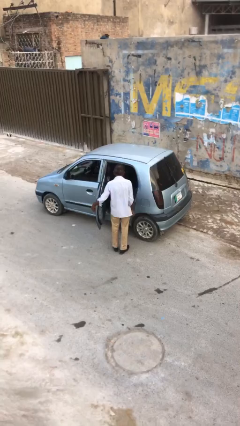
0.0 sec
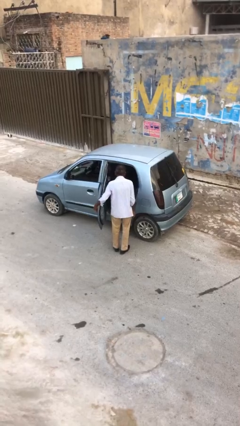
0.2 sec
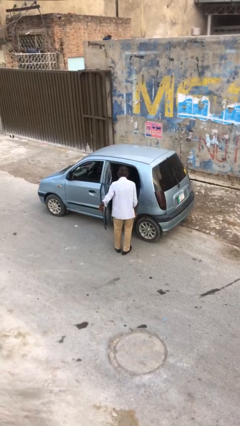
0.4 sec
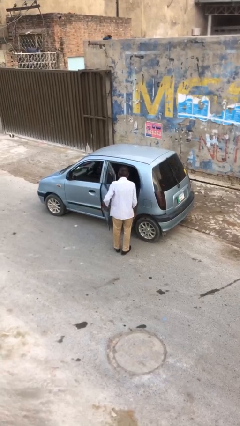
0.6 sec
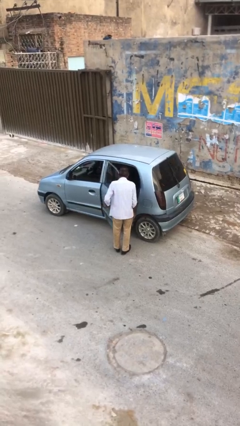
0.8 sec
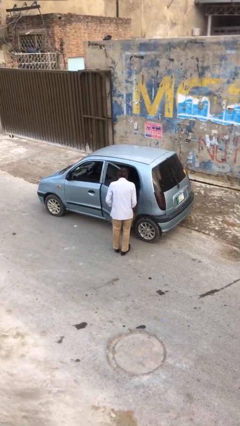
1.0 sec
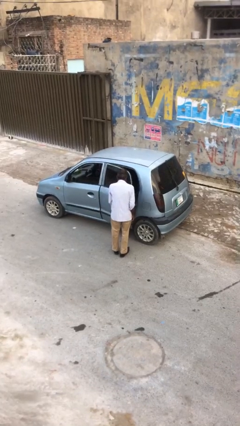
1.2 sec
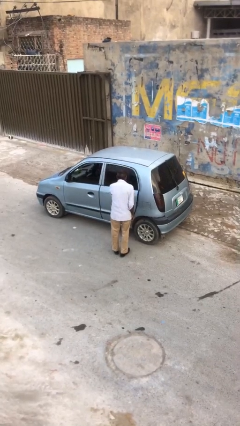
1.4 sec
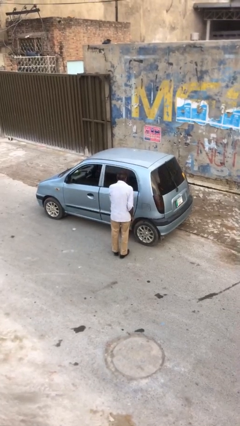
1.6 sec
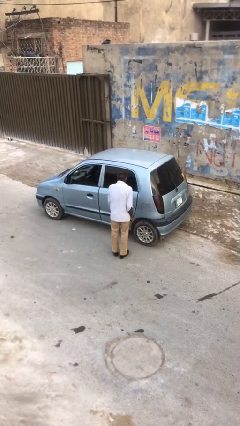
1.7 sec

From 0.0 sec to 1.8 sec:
person closes car door

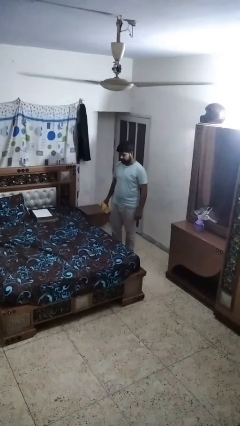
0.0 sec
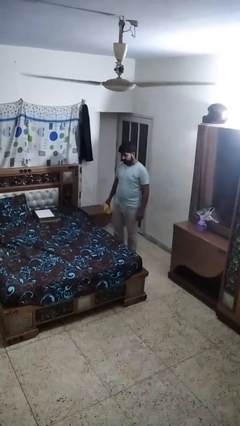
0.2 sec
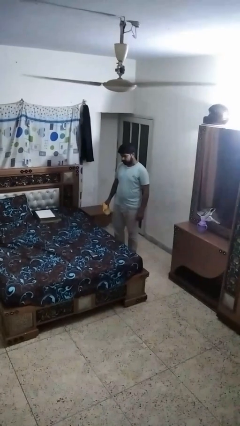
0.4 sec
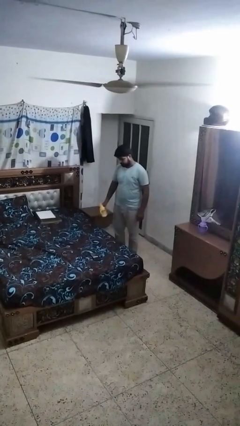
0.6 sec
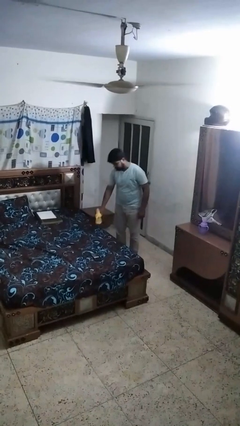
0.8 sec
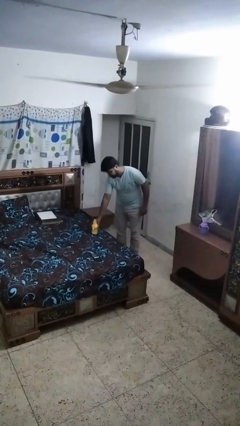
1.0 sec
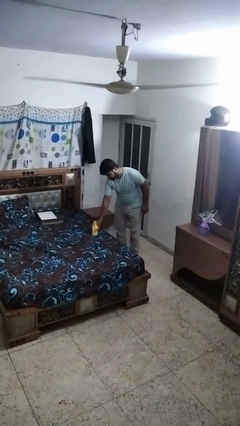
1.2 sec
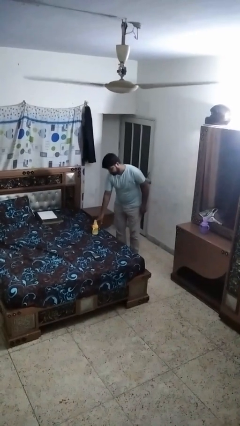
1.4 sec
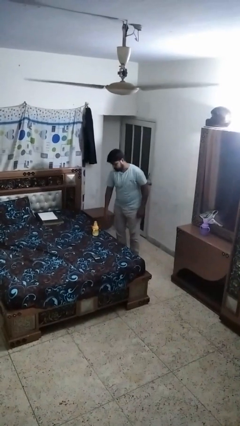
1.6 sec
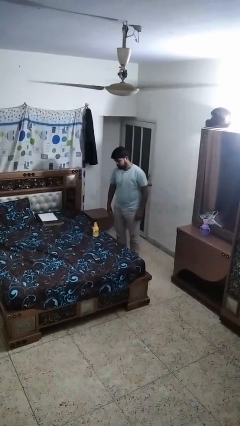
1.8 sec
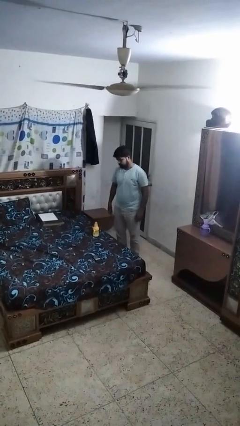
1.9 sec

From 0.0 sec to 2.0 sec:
person puts down object on bed

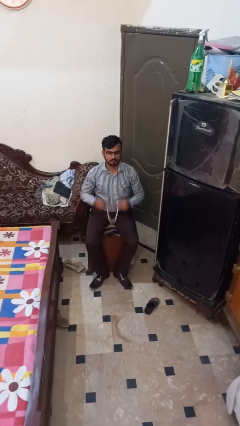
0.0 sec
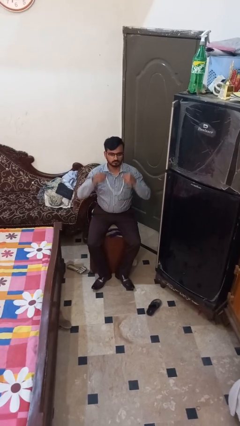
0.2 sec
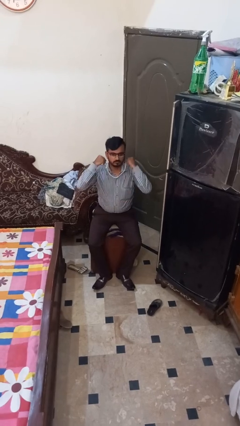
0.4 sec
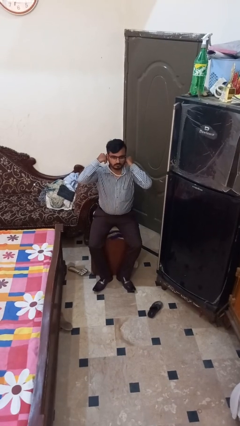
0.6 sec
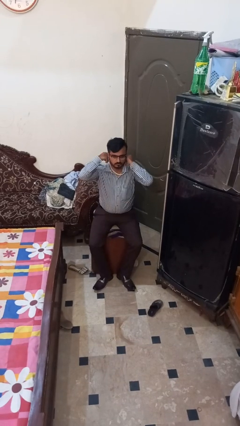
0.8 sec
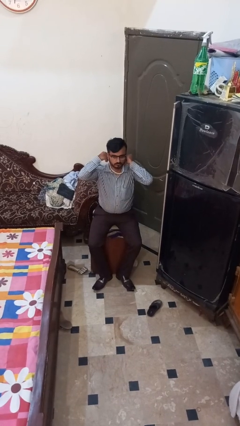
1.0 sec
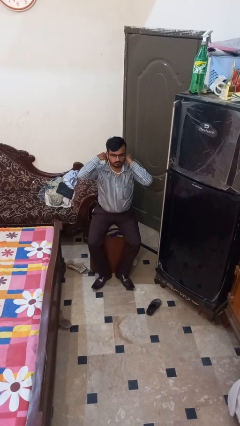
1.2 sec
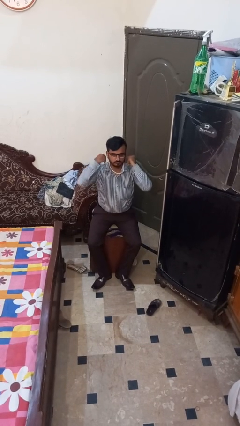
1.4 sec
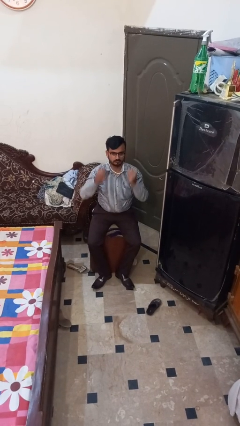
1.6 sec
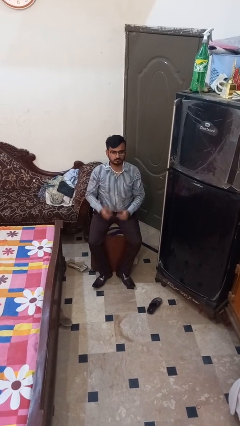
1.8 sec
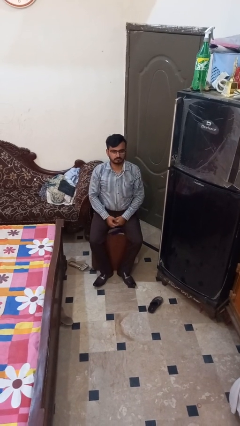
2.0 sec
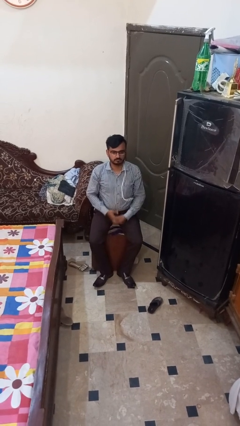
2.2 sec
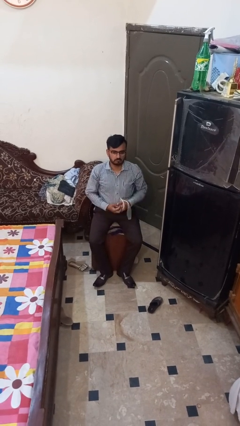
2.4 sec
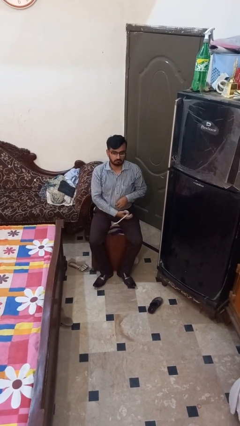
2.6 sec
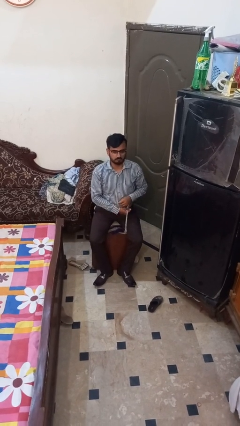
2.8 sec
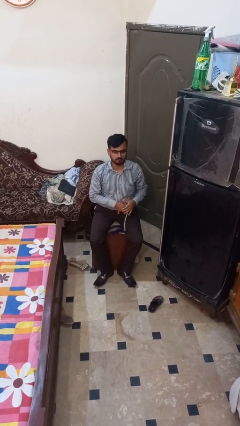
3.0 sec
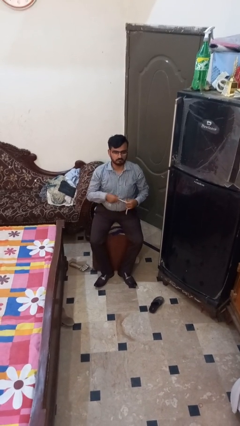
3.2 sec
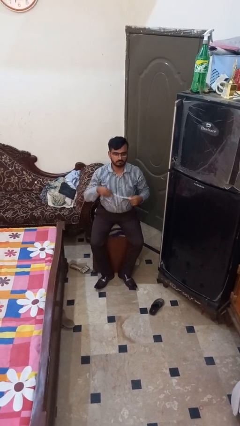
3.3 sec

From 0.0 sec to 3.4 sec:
person puts on necklace

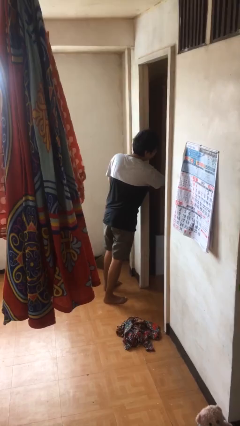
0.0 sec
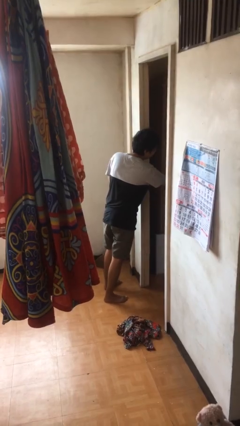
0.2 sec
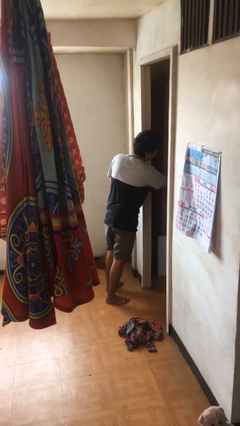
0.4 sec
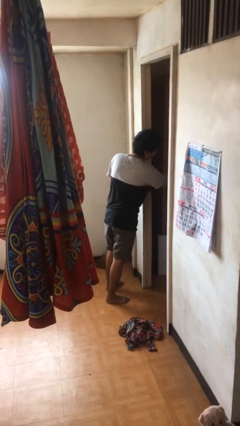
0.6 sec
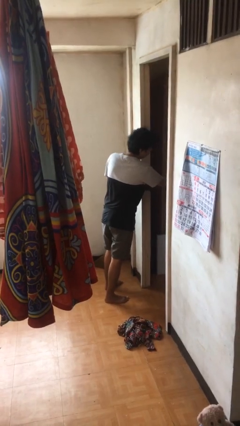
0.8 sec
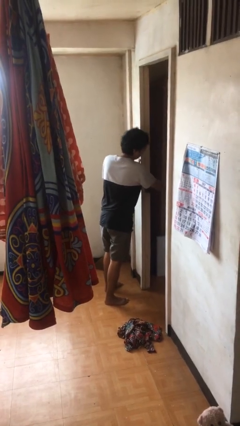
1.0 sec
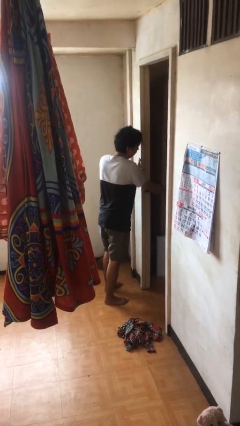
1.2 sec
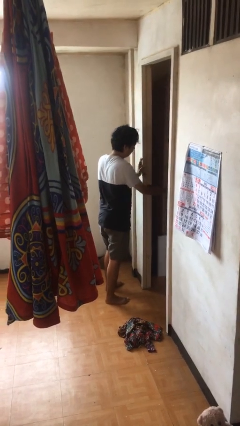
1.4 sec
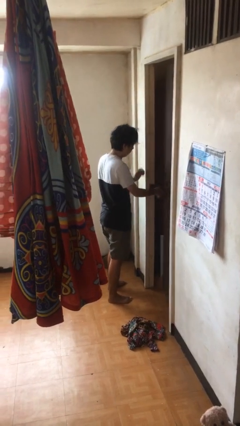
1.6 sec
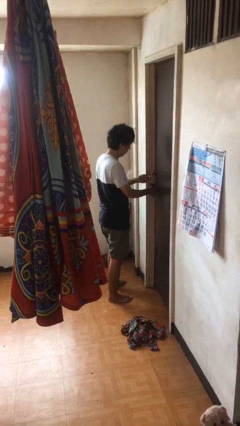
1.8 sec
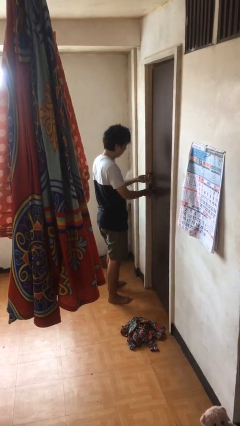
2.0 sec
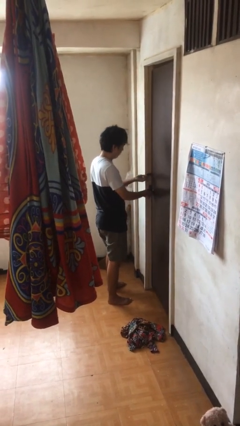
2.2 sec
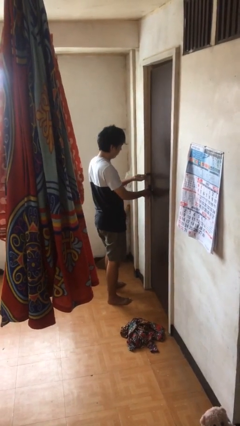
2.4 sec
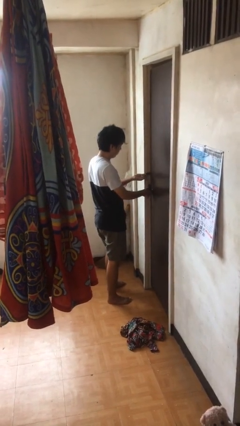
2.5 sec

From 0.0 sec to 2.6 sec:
person closes facility door

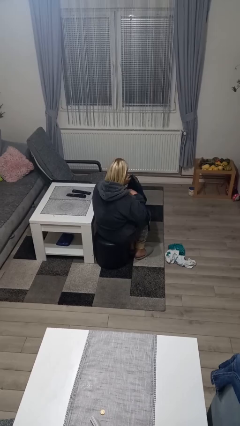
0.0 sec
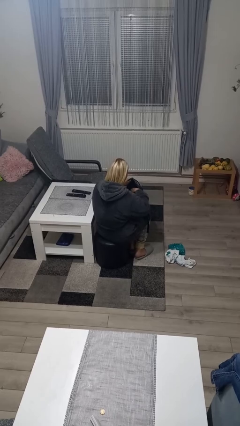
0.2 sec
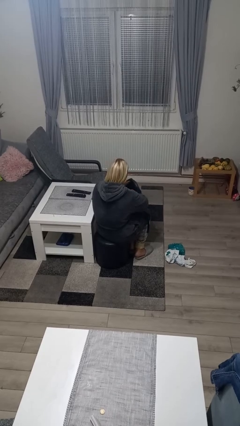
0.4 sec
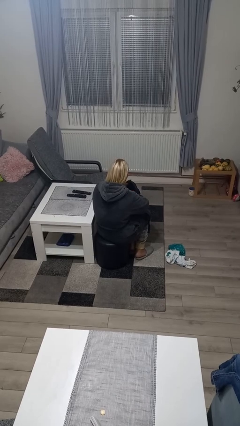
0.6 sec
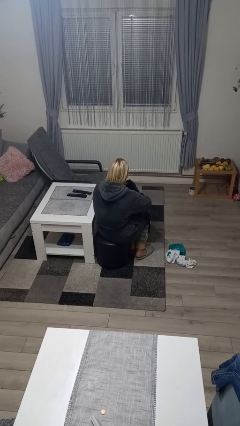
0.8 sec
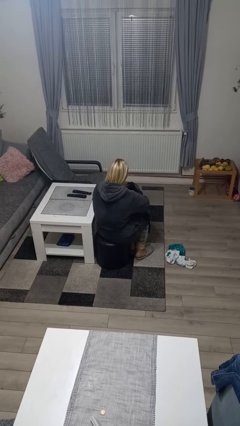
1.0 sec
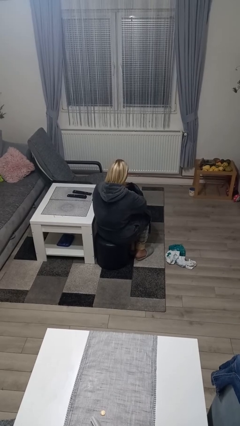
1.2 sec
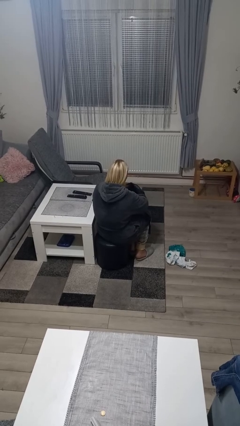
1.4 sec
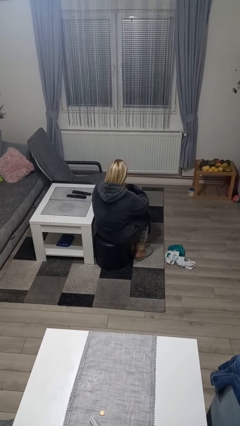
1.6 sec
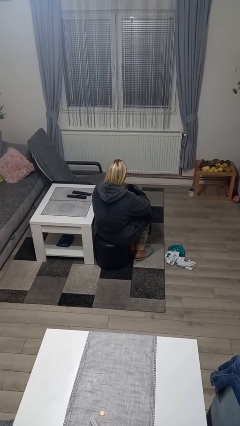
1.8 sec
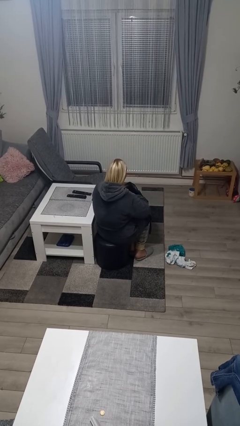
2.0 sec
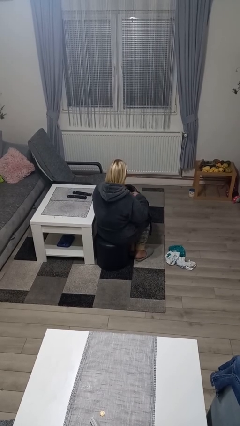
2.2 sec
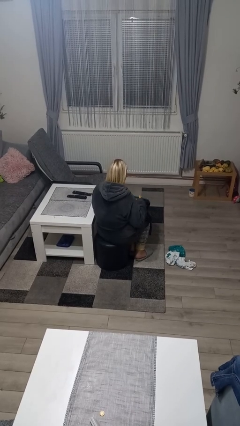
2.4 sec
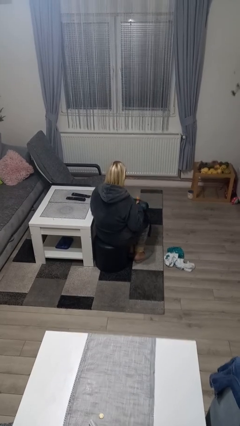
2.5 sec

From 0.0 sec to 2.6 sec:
person searches in bag

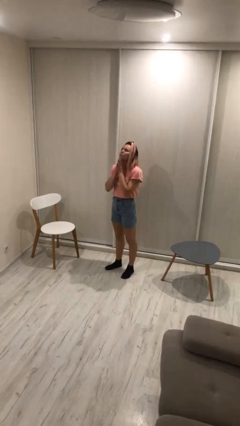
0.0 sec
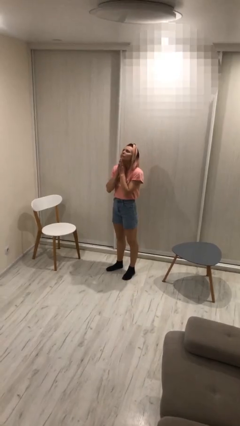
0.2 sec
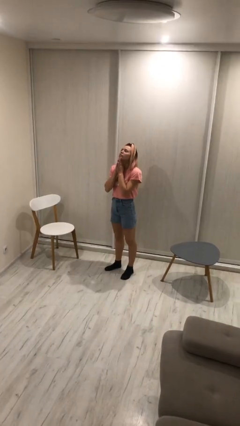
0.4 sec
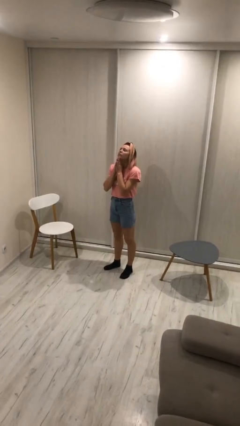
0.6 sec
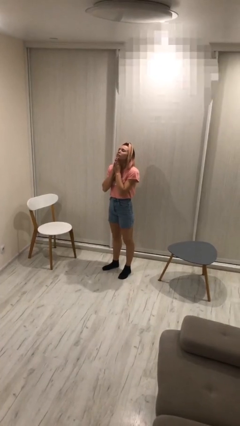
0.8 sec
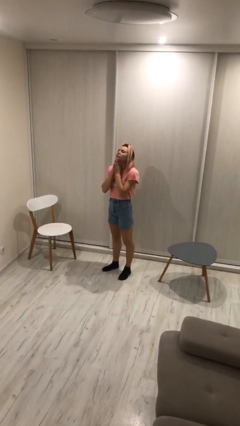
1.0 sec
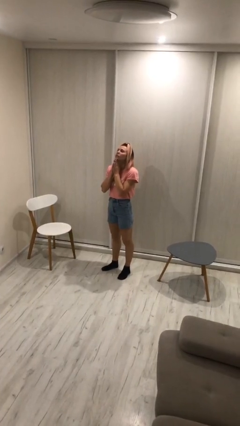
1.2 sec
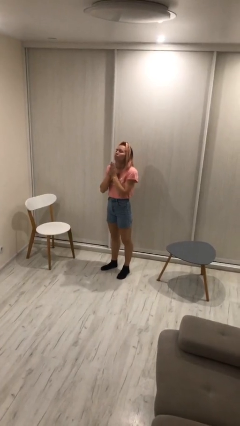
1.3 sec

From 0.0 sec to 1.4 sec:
person prays

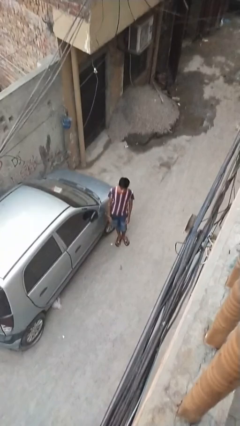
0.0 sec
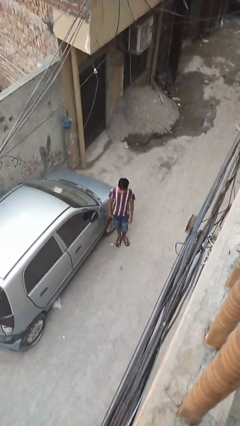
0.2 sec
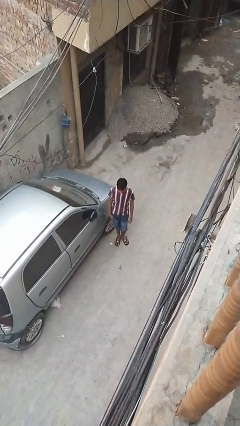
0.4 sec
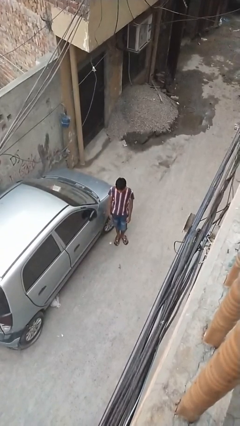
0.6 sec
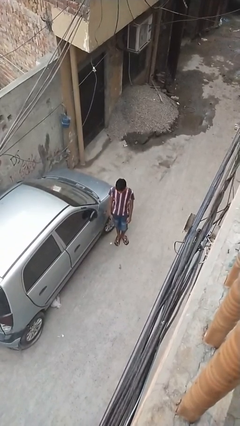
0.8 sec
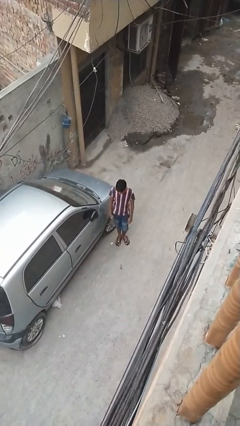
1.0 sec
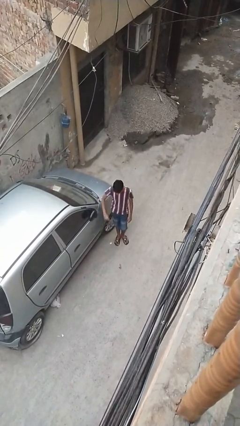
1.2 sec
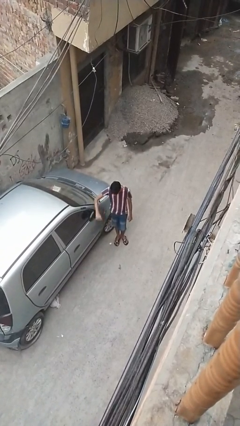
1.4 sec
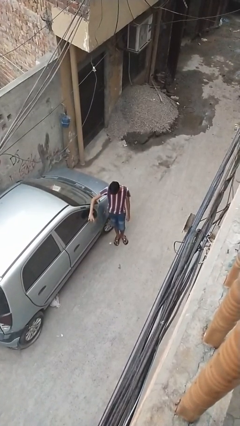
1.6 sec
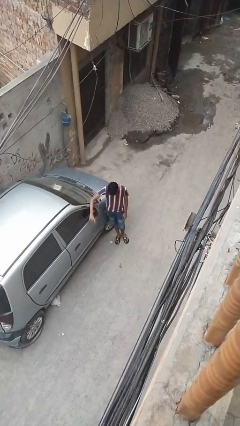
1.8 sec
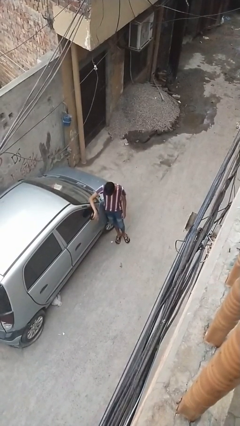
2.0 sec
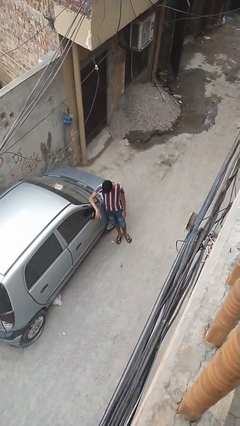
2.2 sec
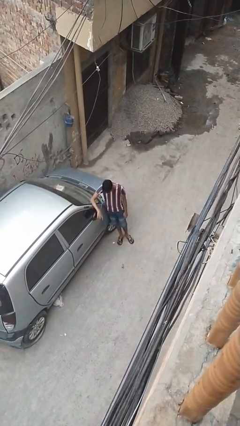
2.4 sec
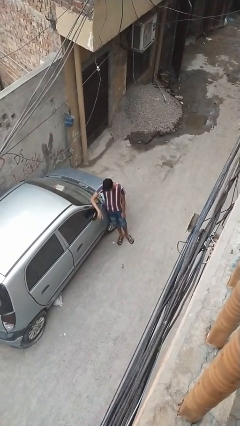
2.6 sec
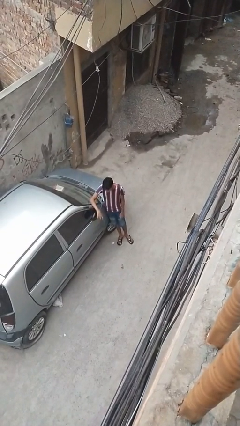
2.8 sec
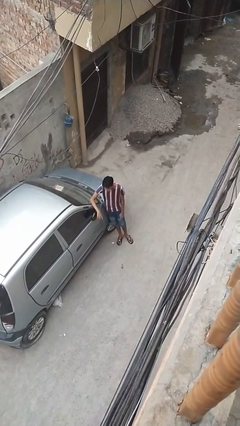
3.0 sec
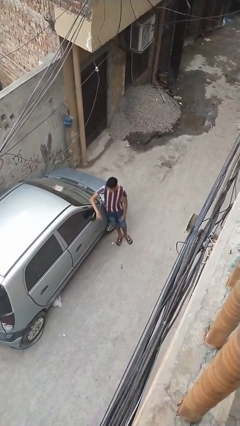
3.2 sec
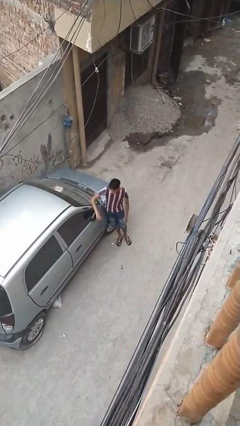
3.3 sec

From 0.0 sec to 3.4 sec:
person leans against car
